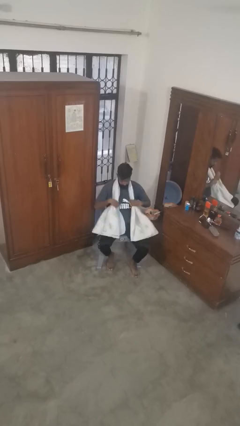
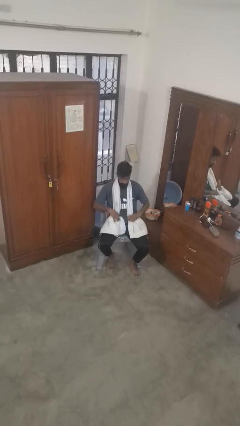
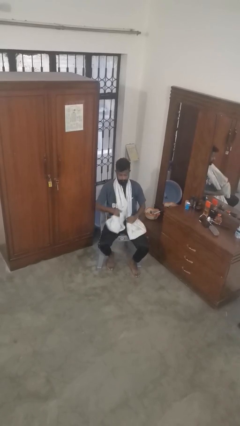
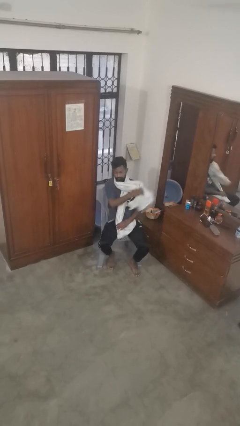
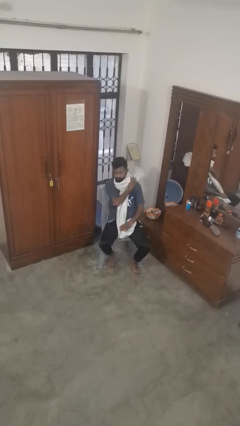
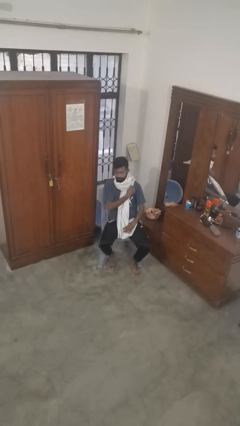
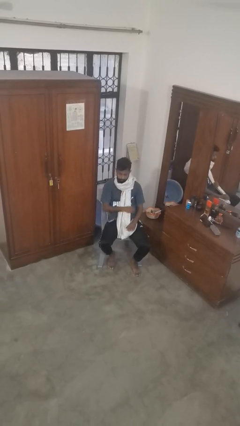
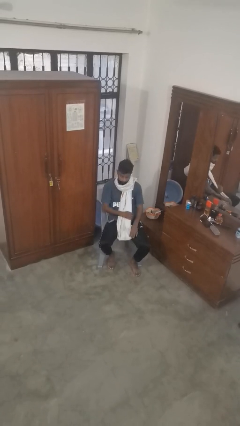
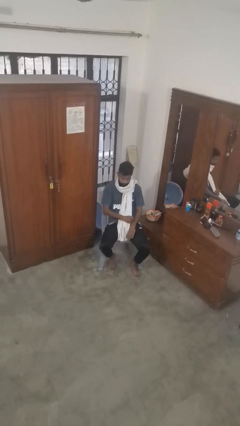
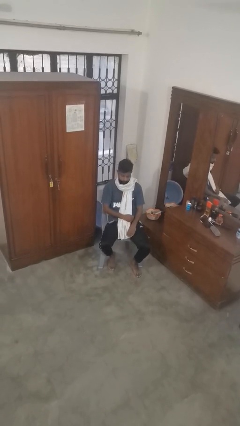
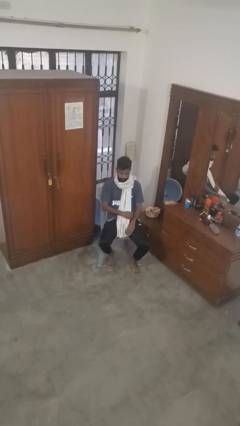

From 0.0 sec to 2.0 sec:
person puts on scarf

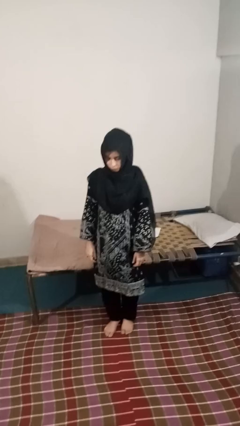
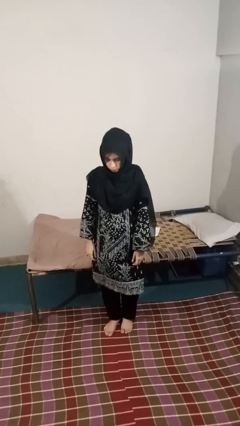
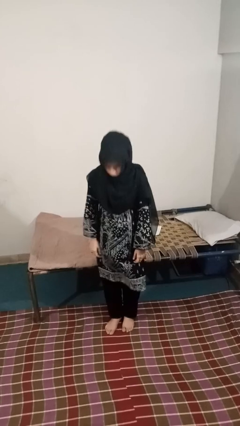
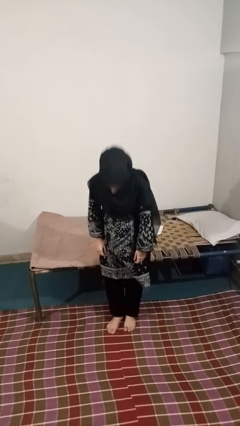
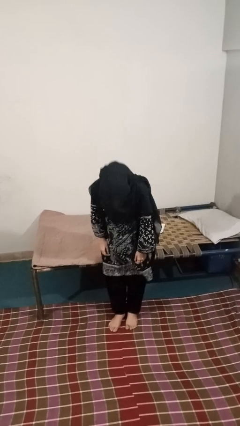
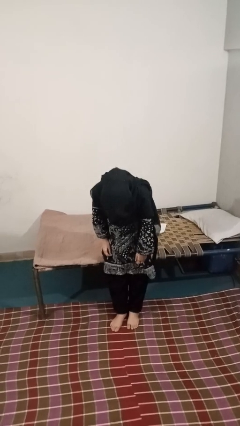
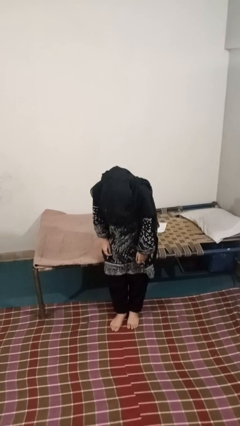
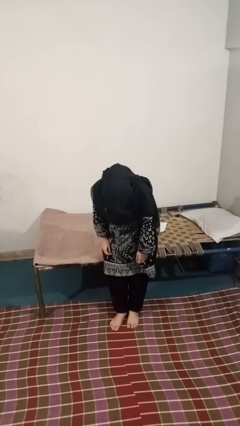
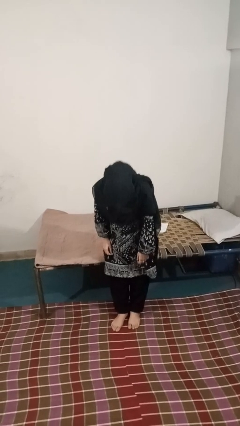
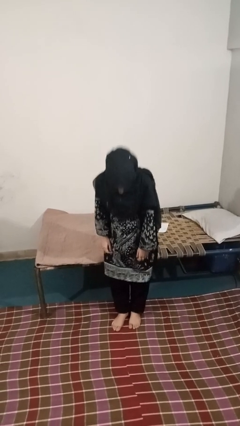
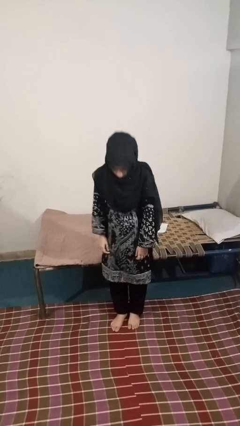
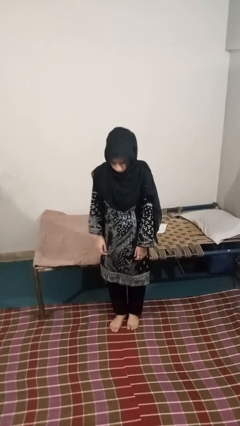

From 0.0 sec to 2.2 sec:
person bows

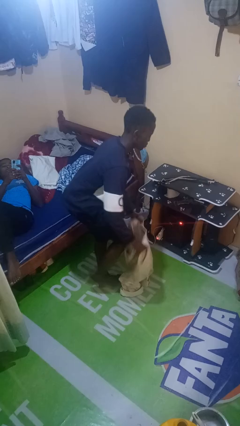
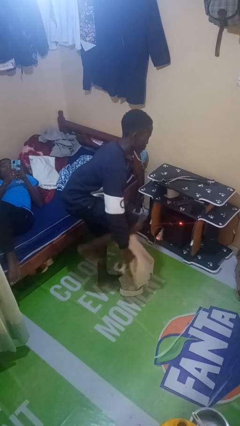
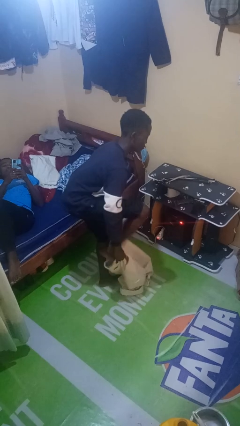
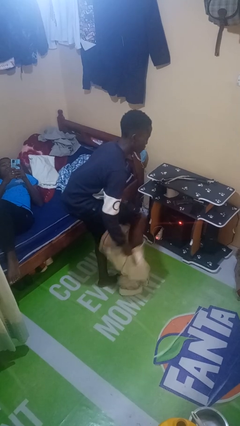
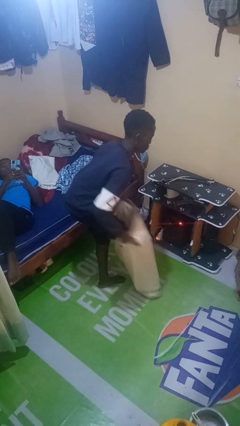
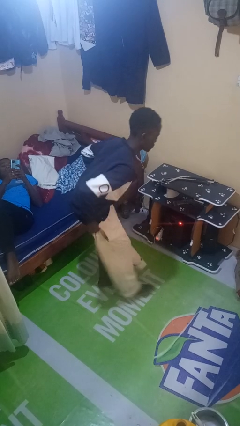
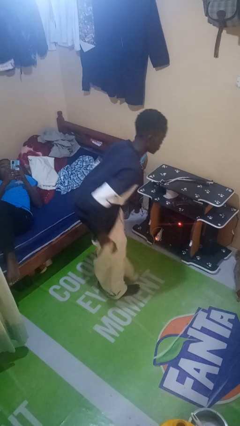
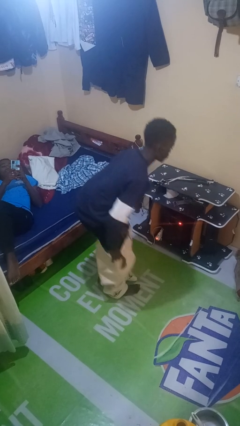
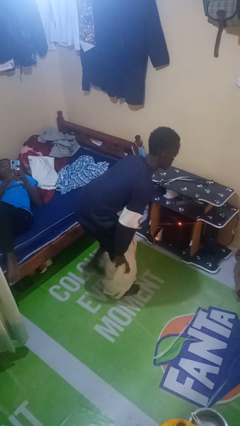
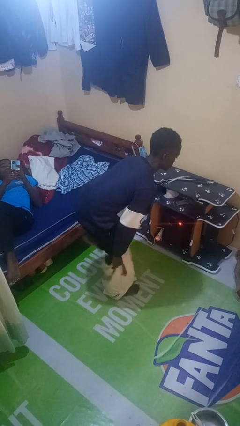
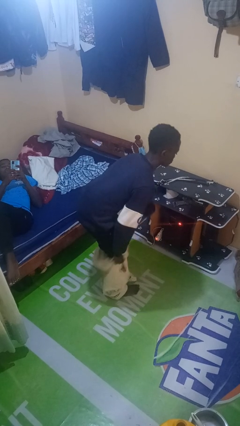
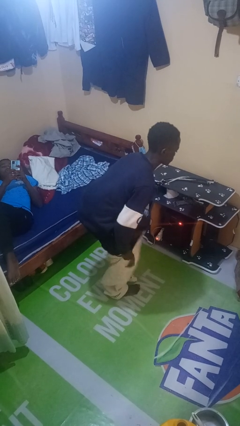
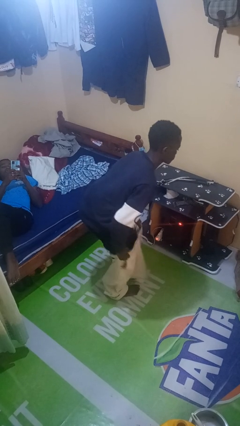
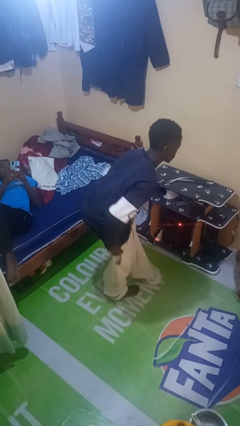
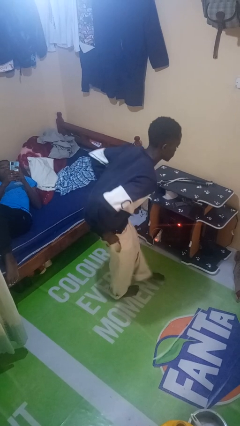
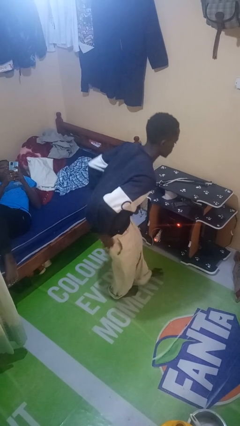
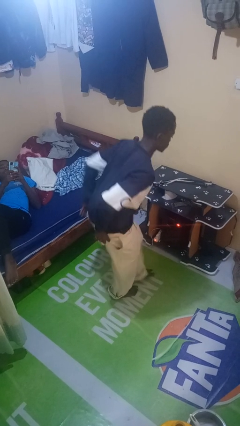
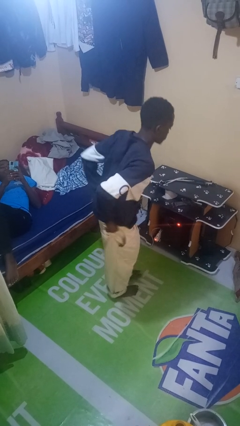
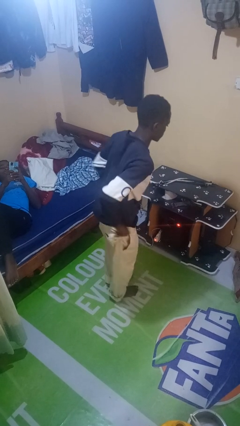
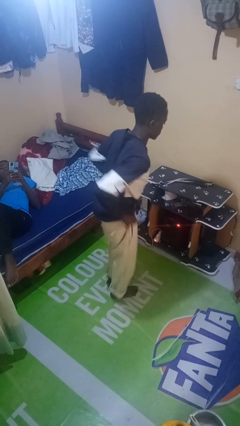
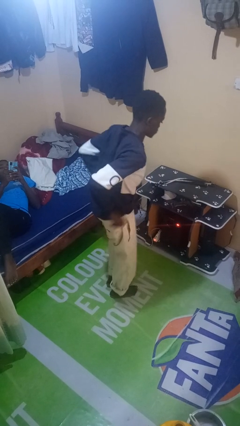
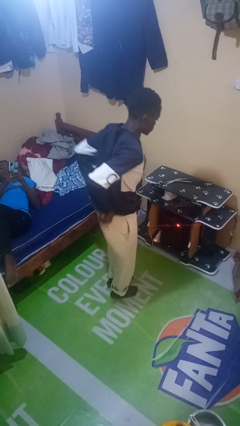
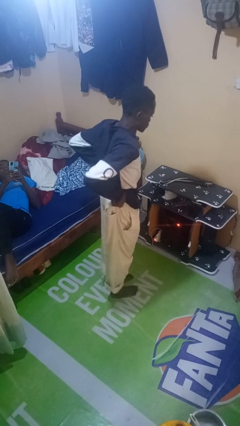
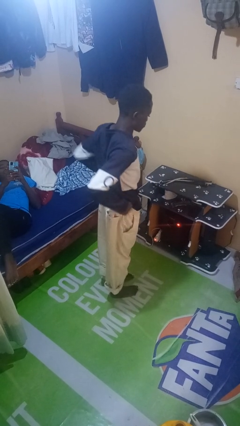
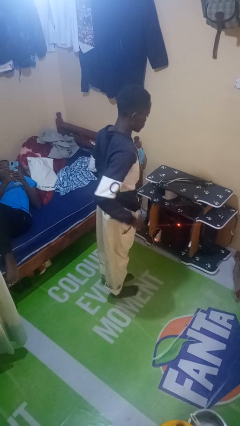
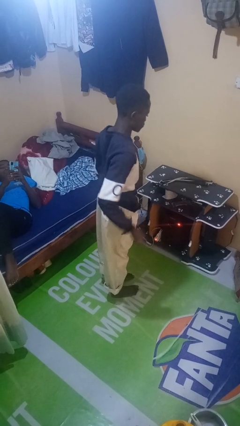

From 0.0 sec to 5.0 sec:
person puts on pants

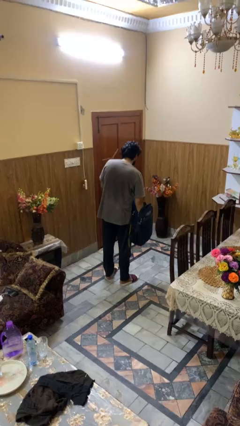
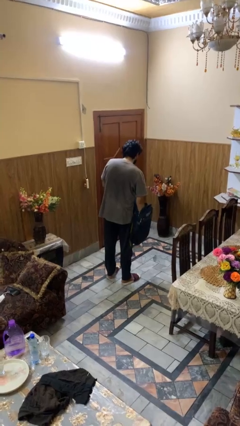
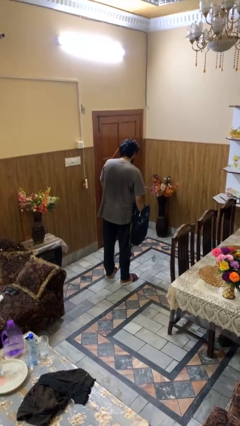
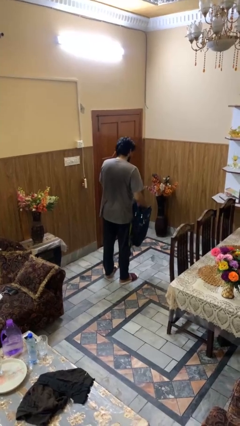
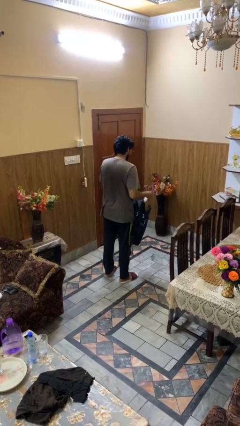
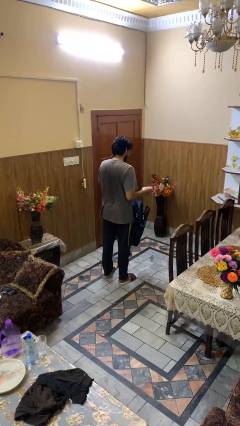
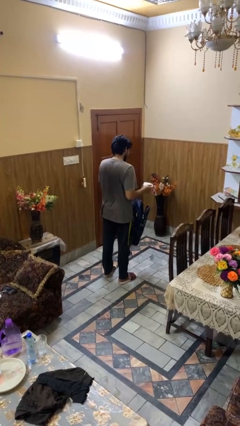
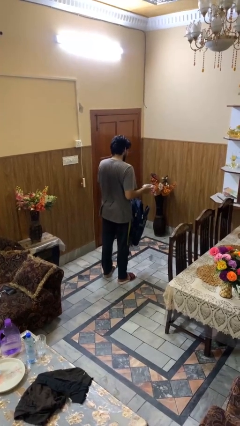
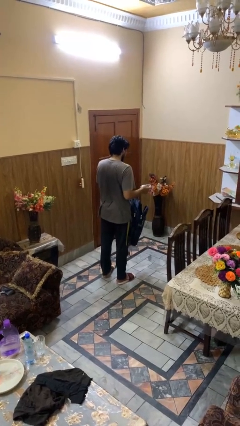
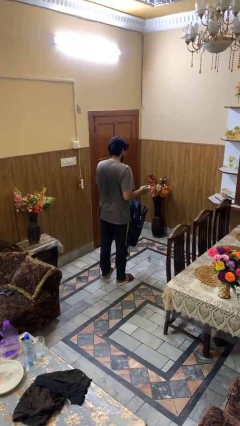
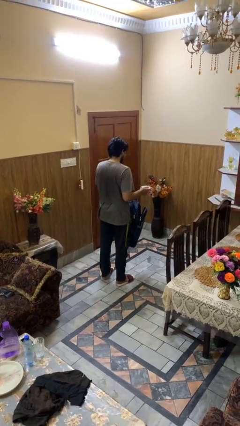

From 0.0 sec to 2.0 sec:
person takes object from backpack

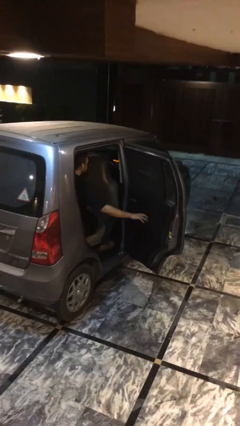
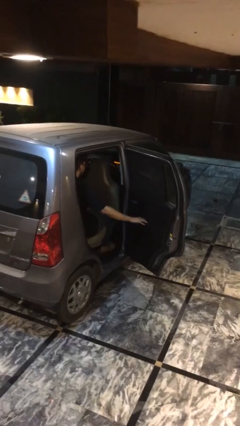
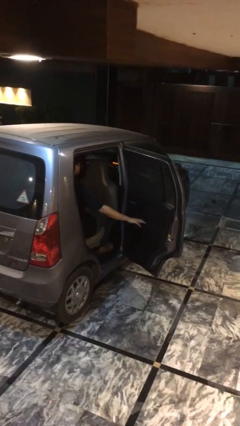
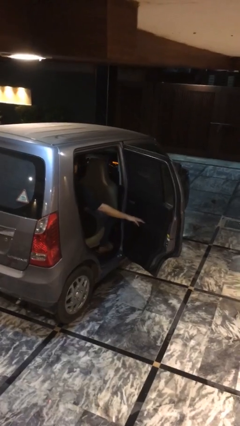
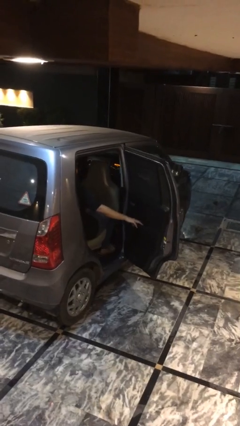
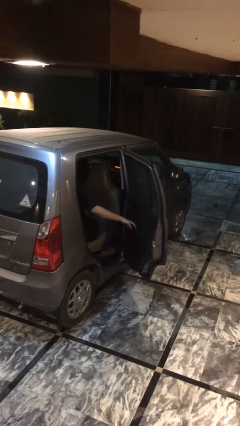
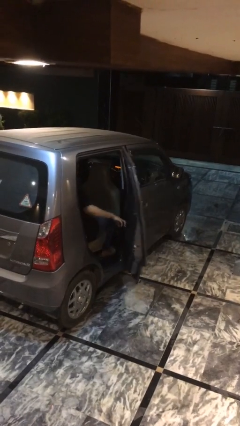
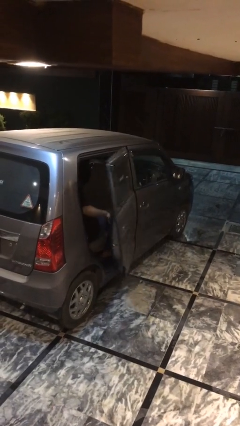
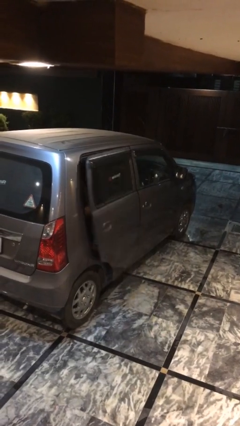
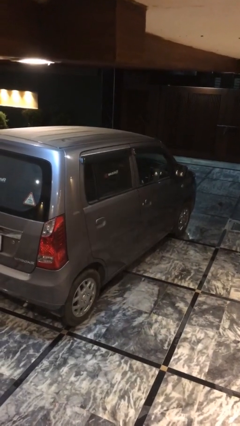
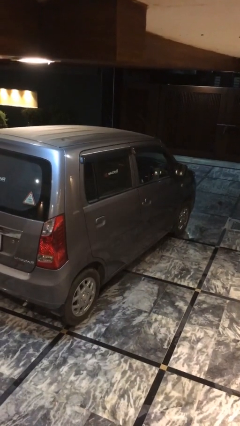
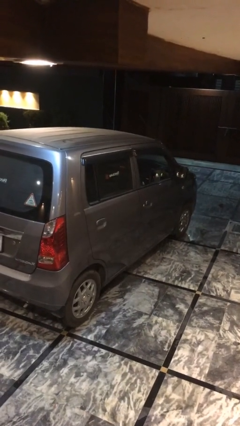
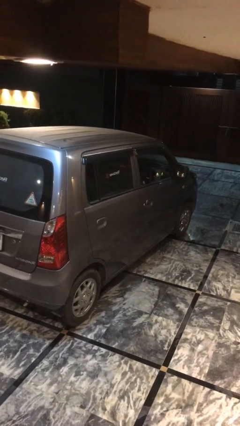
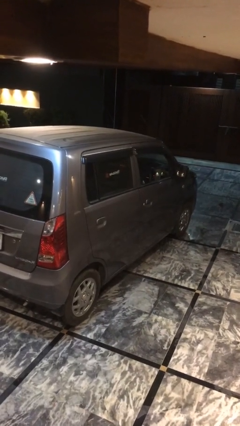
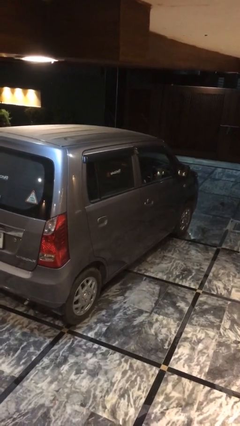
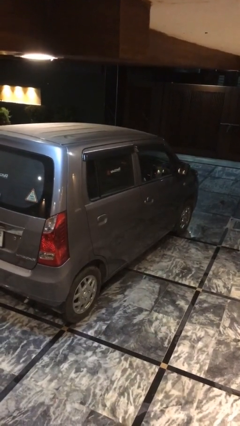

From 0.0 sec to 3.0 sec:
person closes car door

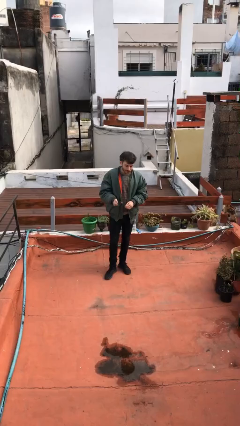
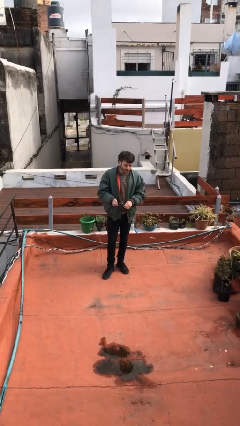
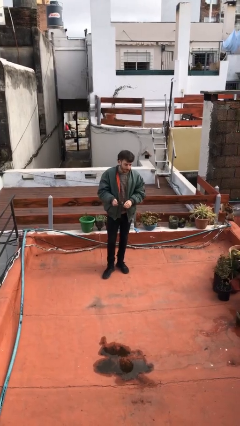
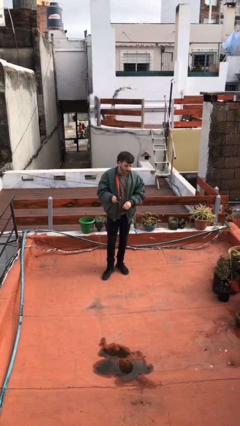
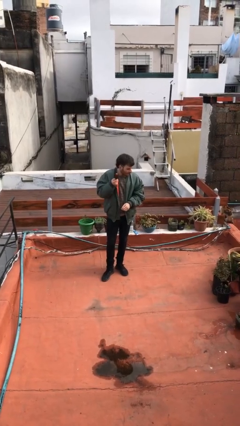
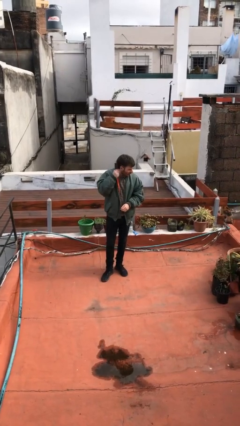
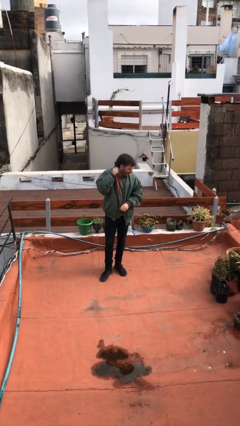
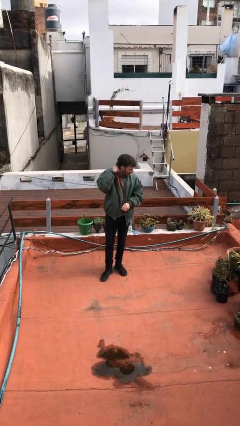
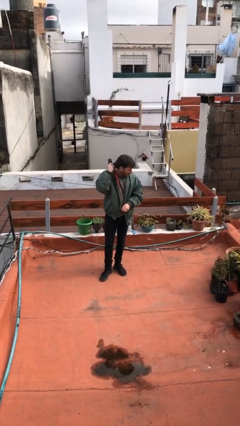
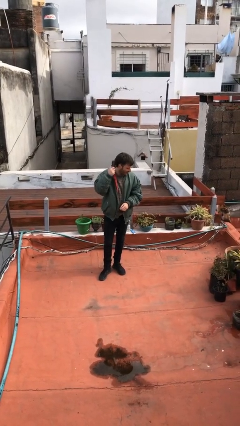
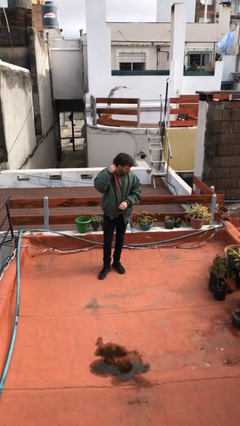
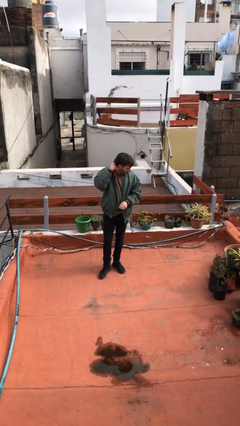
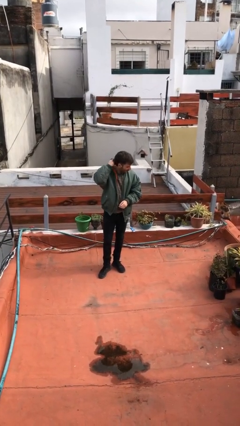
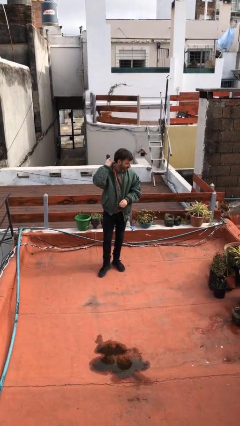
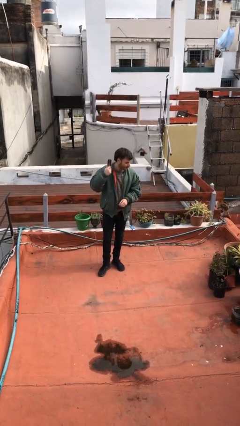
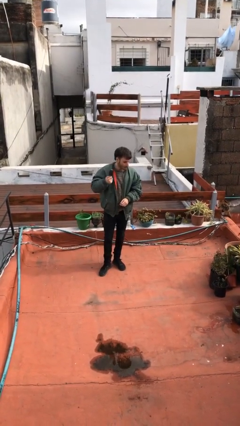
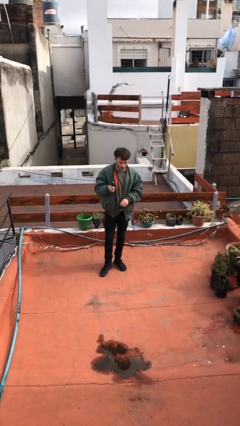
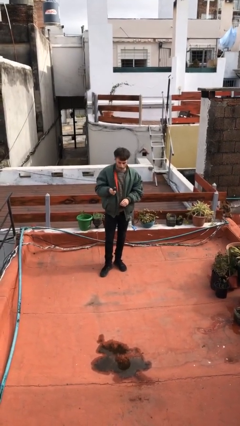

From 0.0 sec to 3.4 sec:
person brushes hair
